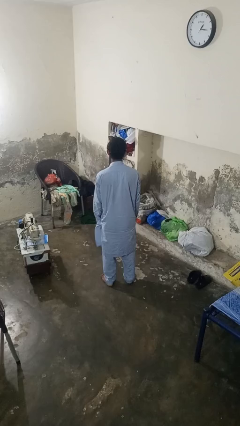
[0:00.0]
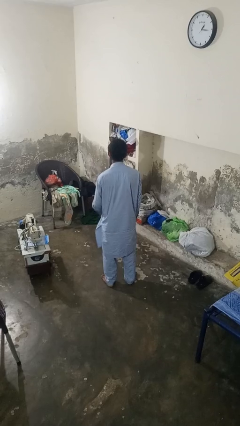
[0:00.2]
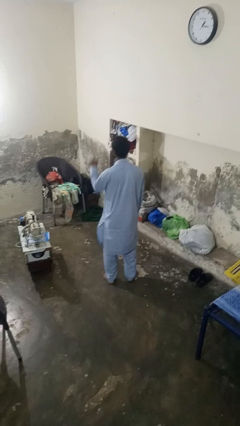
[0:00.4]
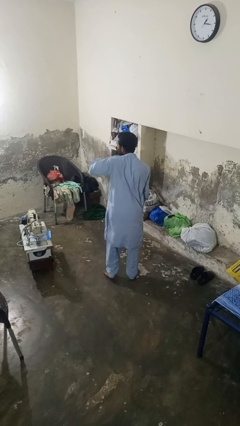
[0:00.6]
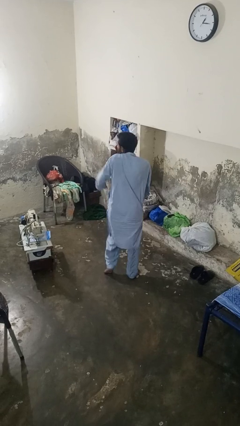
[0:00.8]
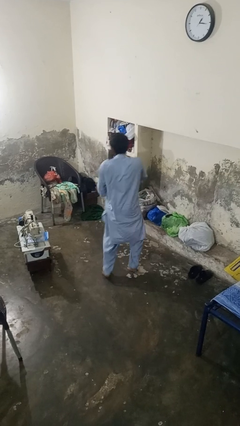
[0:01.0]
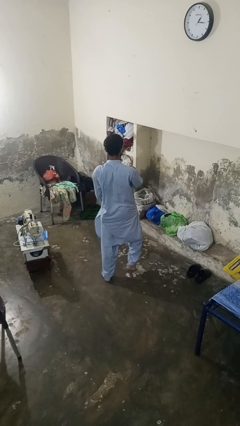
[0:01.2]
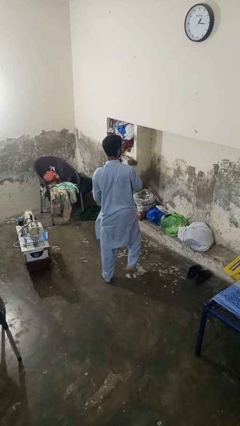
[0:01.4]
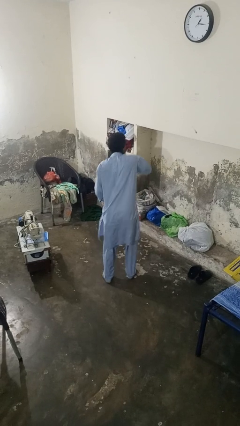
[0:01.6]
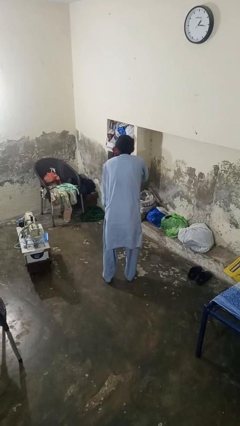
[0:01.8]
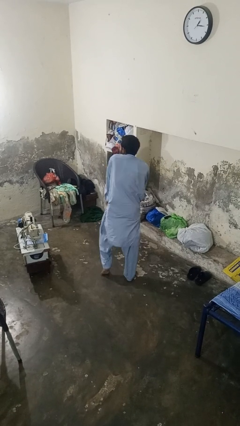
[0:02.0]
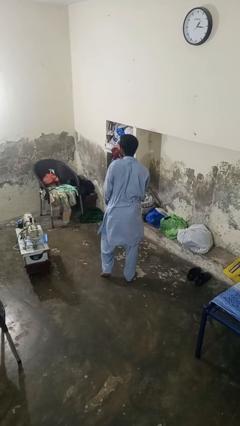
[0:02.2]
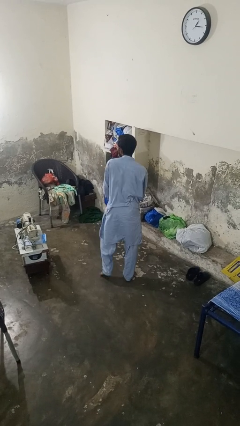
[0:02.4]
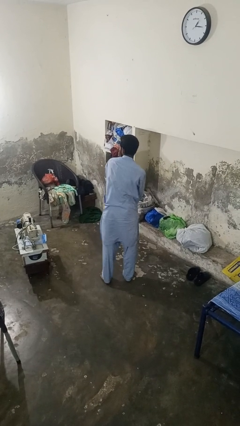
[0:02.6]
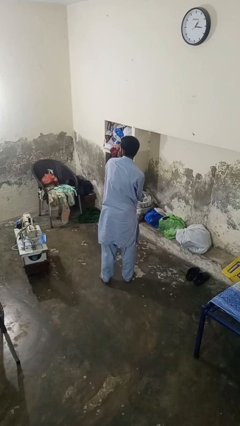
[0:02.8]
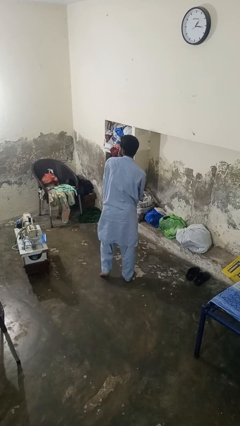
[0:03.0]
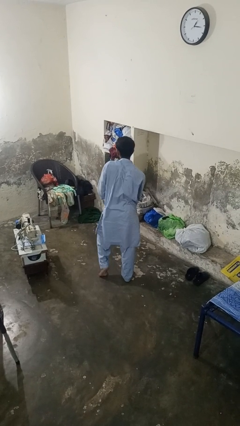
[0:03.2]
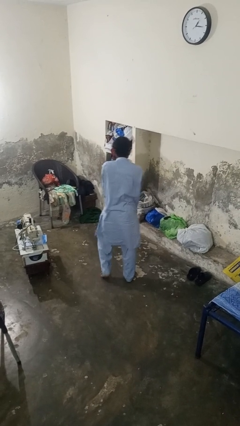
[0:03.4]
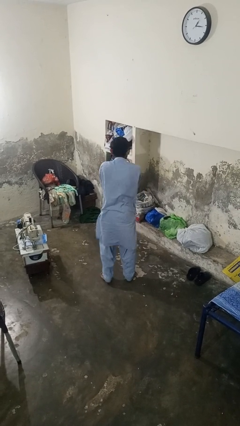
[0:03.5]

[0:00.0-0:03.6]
person dances in place

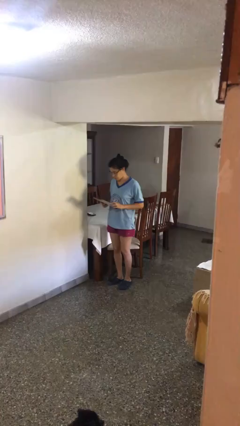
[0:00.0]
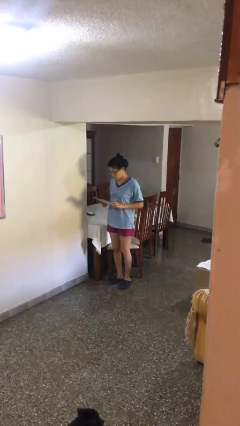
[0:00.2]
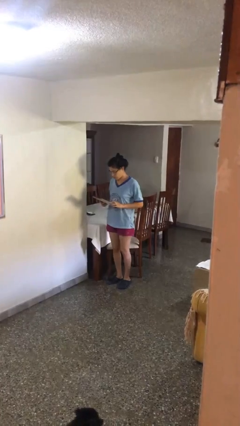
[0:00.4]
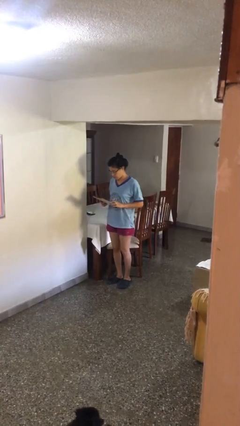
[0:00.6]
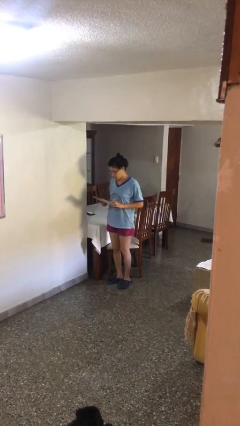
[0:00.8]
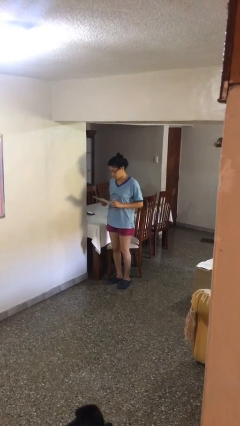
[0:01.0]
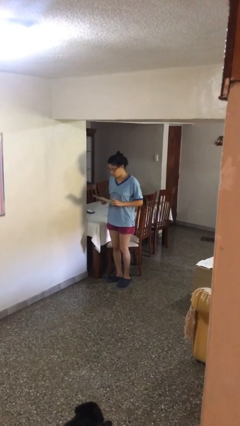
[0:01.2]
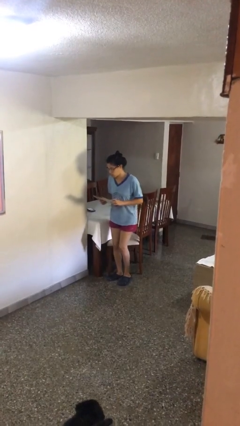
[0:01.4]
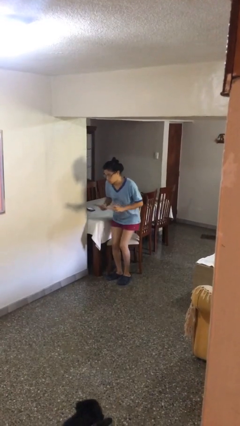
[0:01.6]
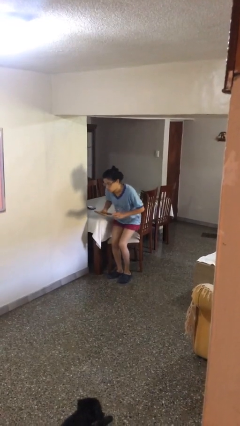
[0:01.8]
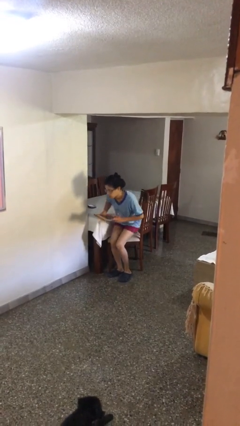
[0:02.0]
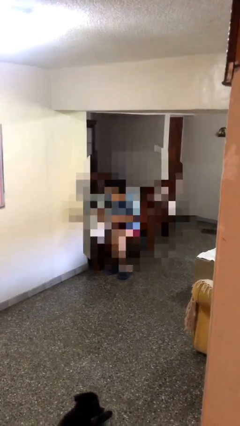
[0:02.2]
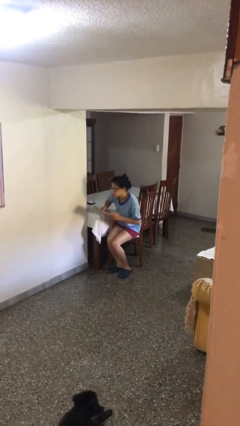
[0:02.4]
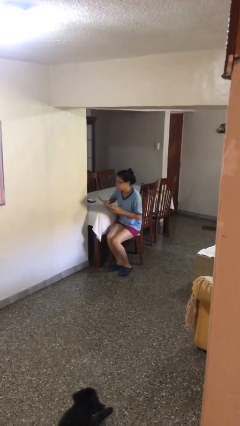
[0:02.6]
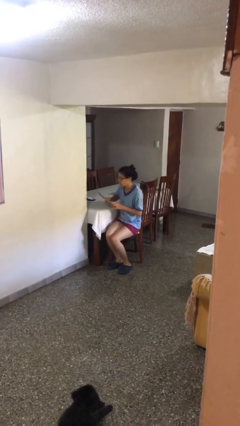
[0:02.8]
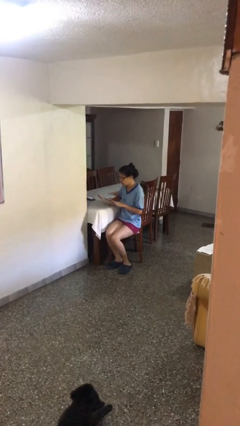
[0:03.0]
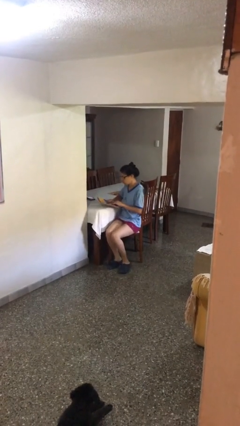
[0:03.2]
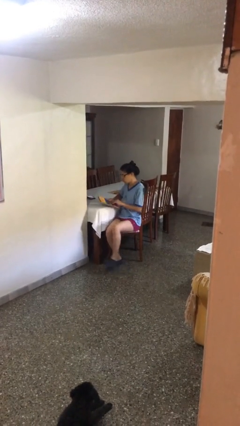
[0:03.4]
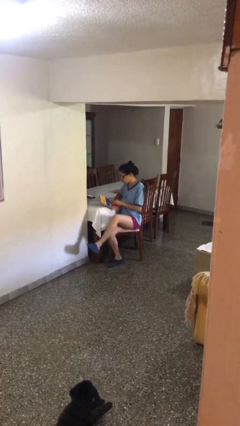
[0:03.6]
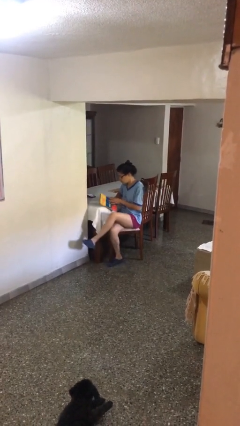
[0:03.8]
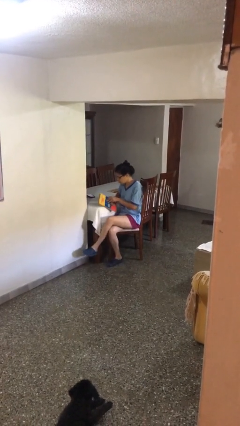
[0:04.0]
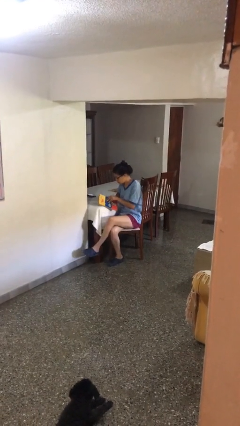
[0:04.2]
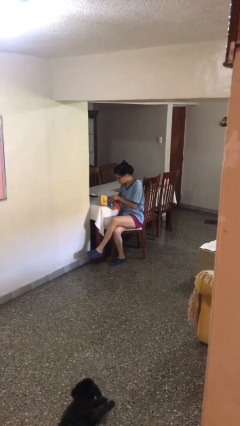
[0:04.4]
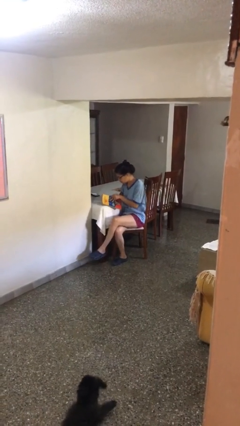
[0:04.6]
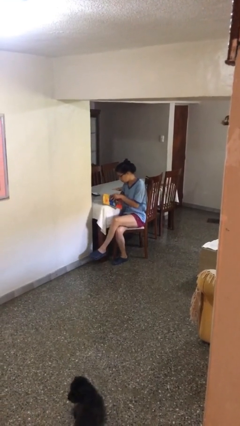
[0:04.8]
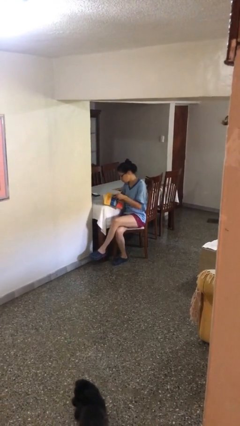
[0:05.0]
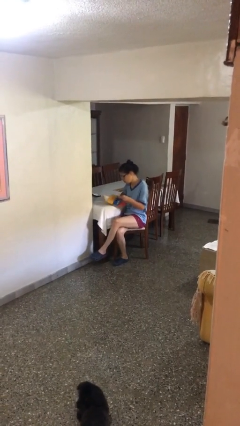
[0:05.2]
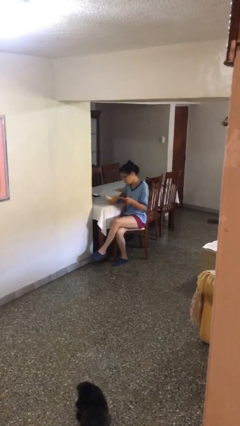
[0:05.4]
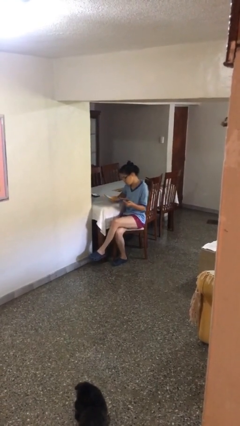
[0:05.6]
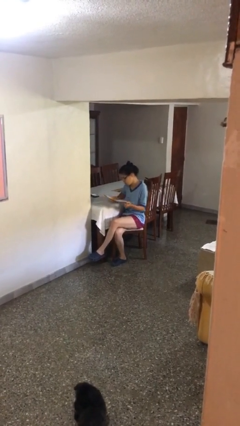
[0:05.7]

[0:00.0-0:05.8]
person sits down

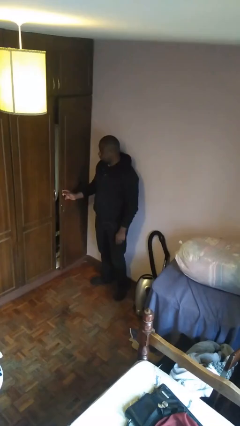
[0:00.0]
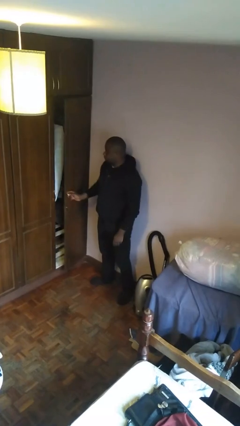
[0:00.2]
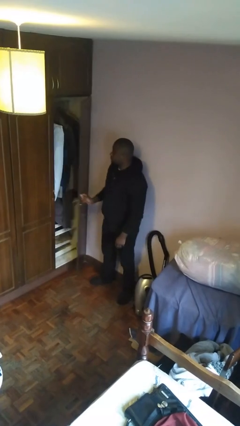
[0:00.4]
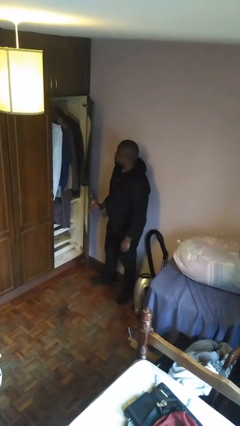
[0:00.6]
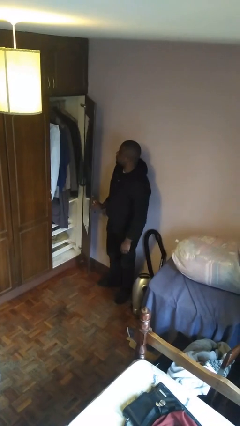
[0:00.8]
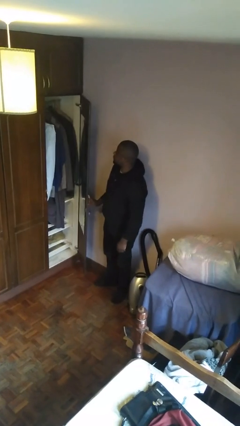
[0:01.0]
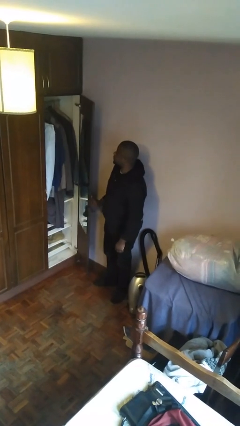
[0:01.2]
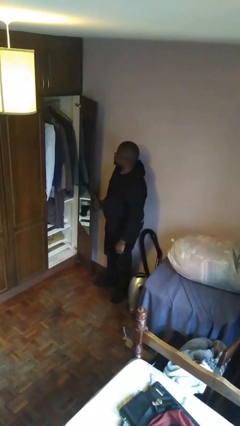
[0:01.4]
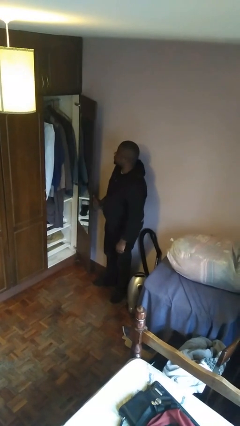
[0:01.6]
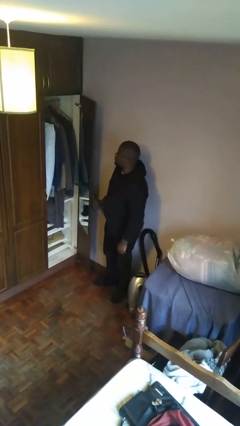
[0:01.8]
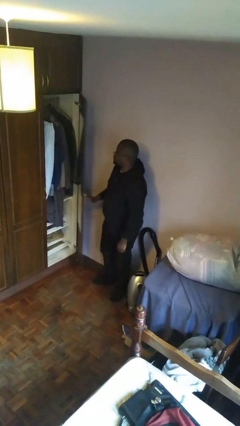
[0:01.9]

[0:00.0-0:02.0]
person opens closet door

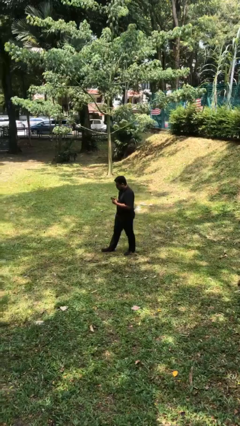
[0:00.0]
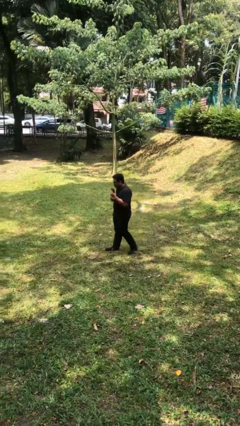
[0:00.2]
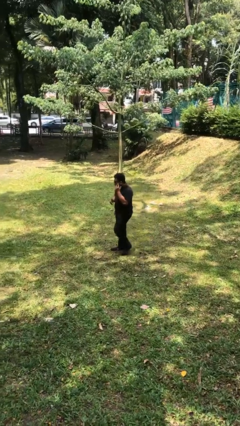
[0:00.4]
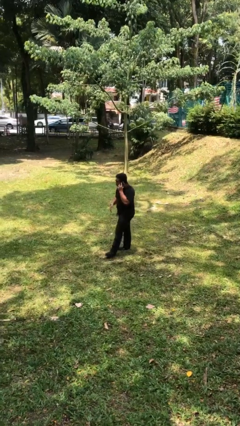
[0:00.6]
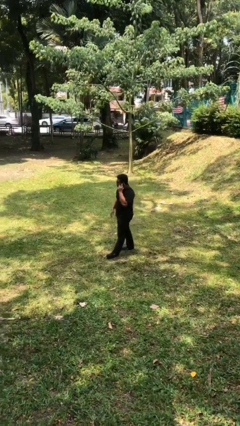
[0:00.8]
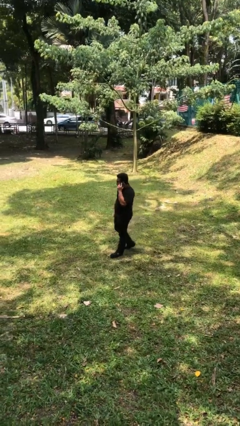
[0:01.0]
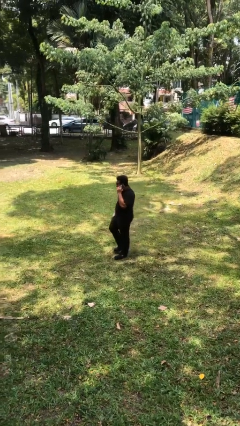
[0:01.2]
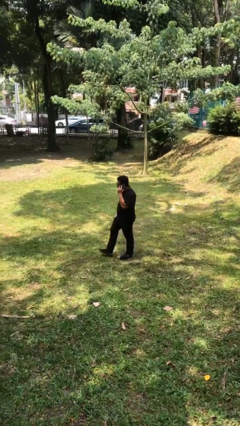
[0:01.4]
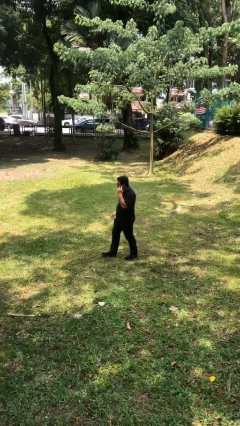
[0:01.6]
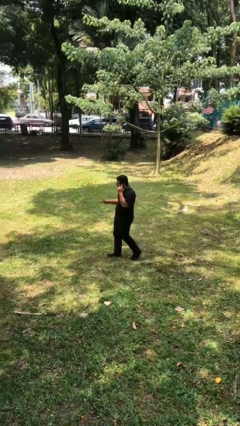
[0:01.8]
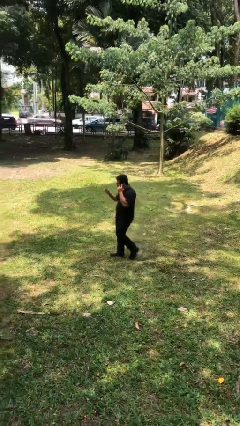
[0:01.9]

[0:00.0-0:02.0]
person talks on phone

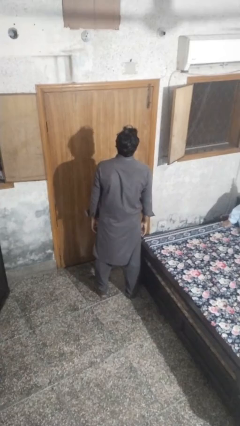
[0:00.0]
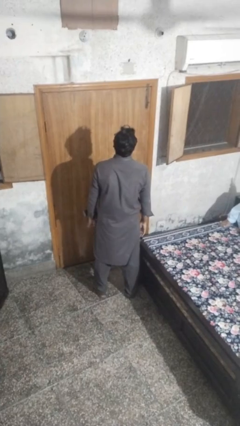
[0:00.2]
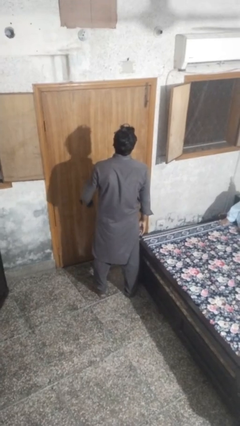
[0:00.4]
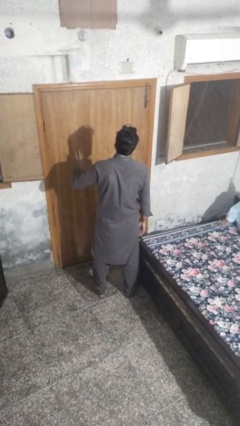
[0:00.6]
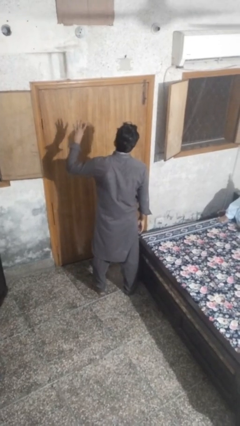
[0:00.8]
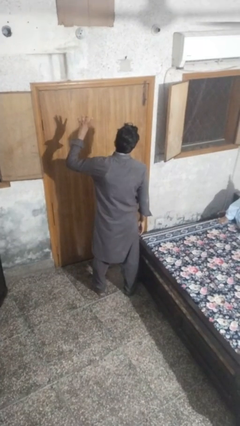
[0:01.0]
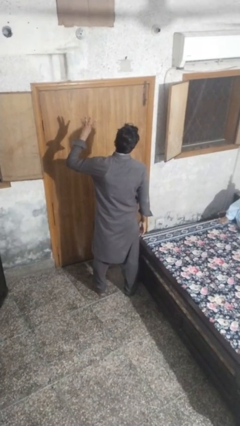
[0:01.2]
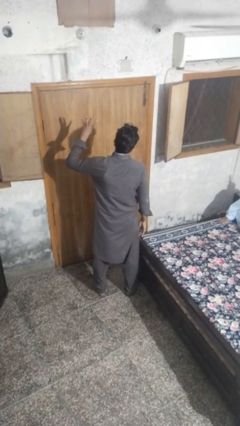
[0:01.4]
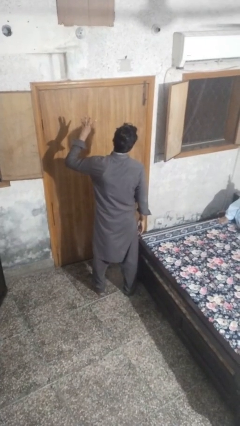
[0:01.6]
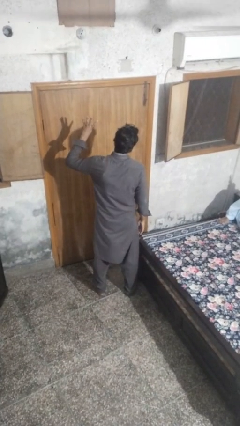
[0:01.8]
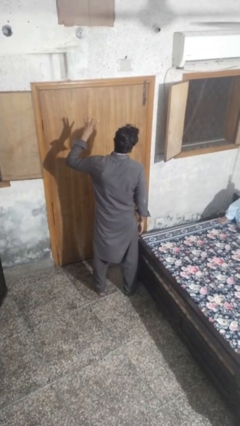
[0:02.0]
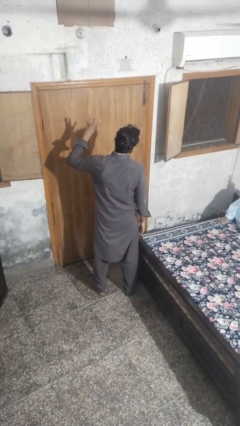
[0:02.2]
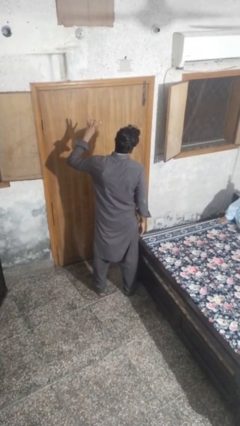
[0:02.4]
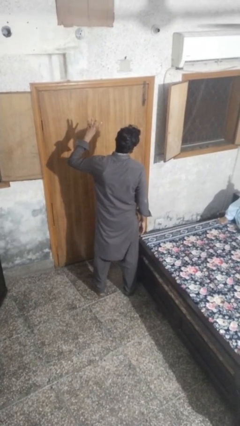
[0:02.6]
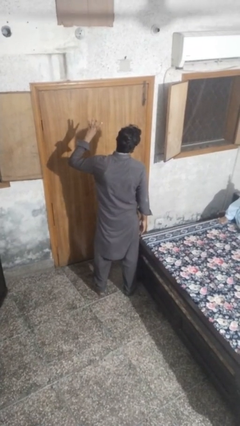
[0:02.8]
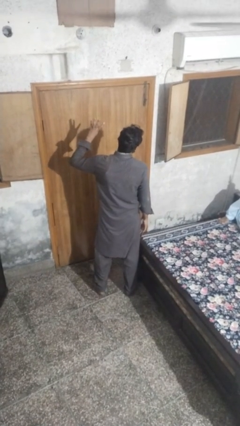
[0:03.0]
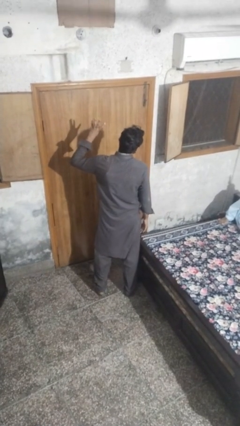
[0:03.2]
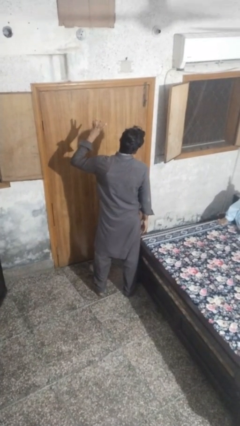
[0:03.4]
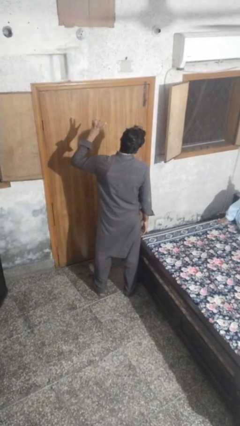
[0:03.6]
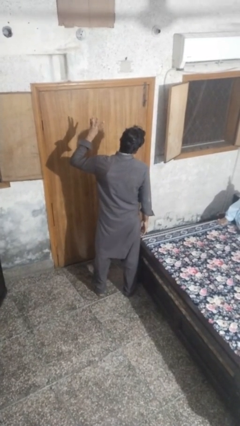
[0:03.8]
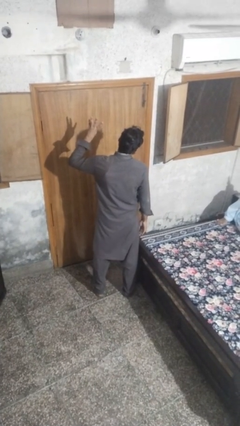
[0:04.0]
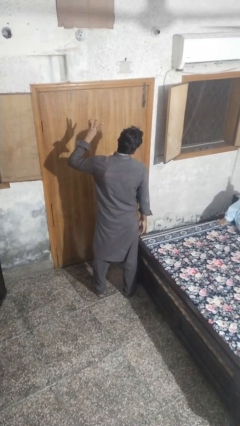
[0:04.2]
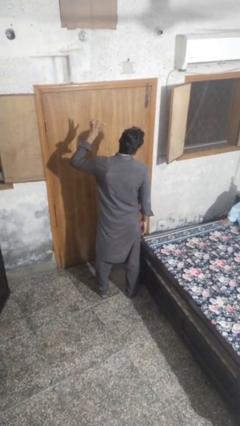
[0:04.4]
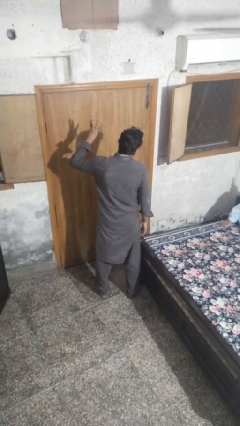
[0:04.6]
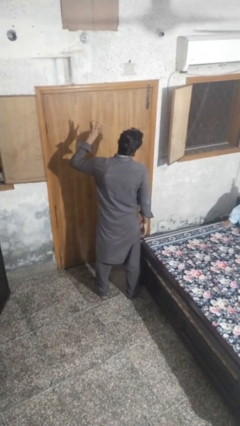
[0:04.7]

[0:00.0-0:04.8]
person gestures number four
